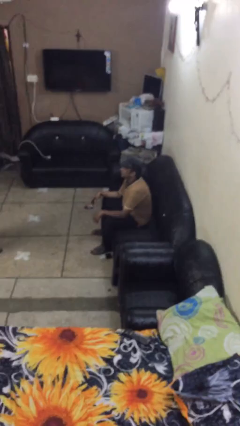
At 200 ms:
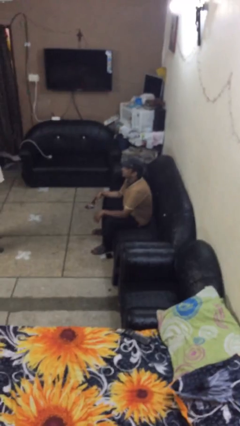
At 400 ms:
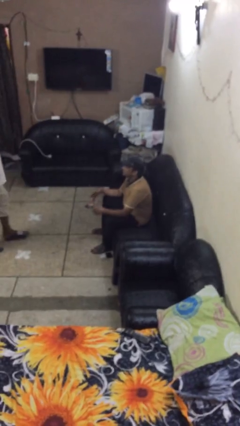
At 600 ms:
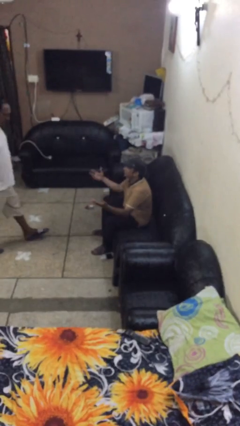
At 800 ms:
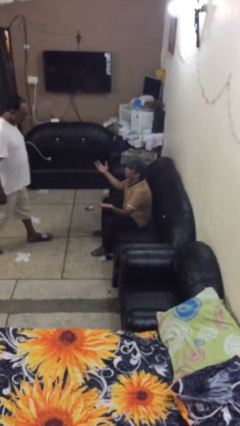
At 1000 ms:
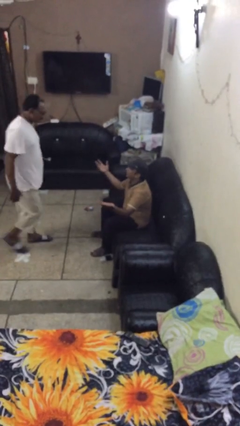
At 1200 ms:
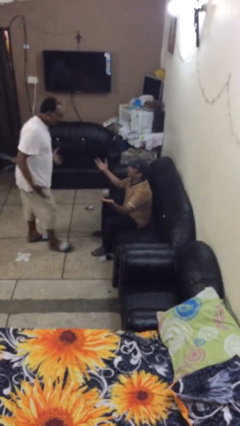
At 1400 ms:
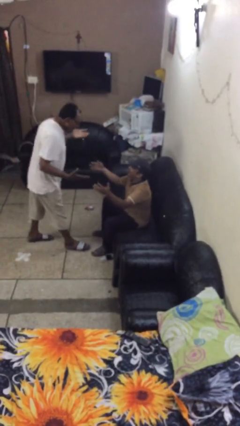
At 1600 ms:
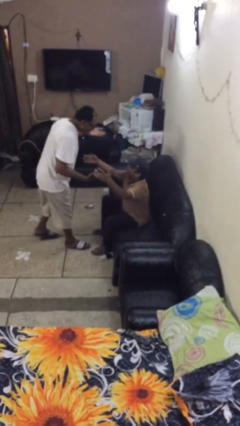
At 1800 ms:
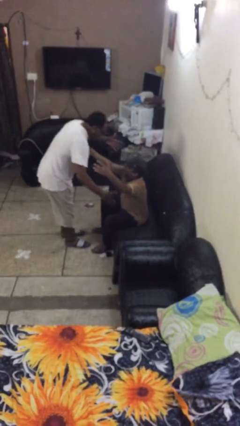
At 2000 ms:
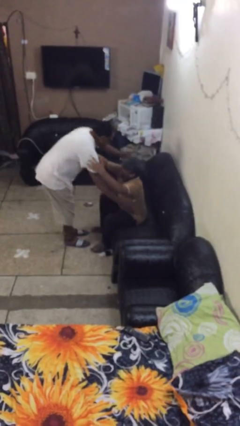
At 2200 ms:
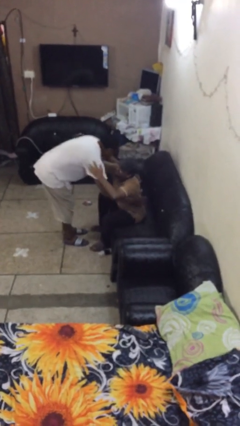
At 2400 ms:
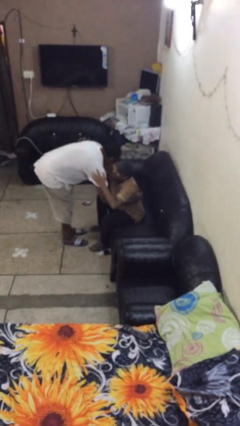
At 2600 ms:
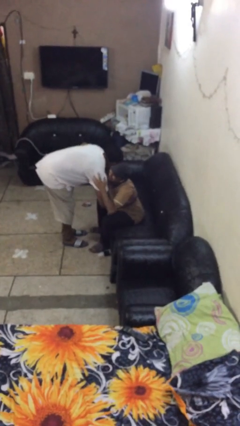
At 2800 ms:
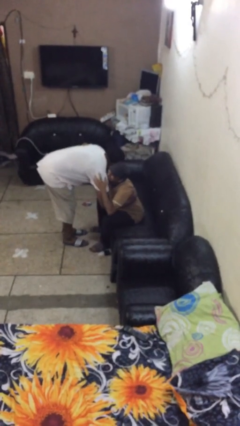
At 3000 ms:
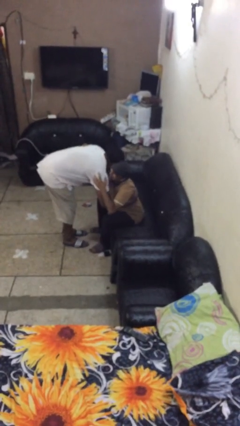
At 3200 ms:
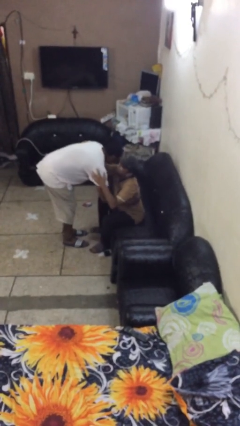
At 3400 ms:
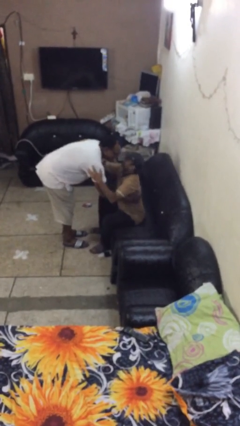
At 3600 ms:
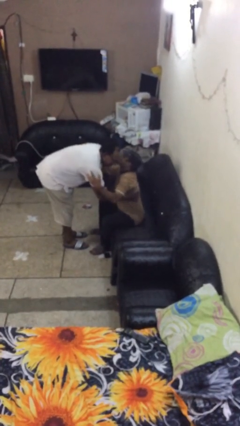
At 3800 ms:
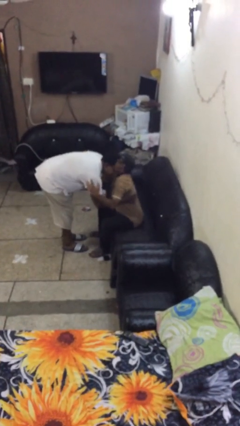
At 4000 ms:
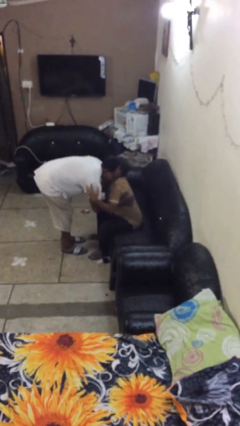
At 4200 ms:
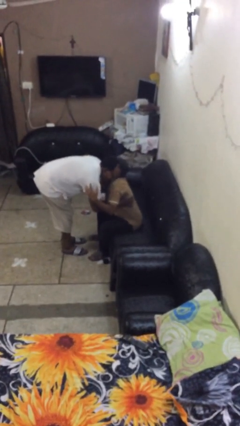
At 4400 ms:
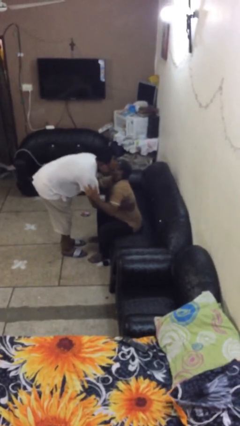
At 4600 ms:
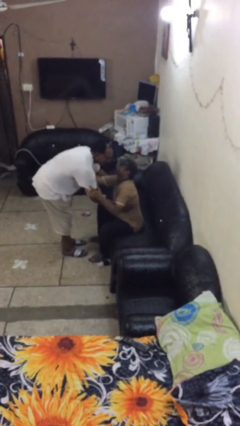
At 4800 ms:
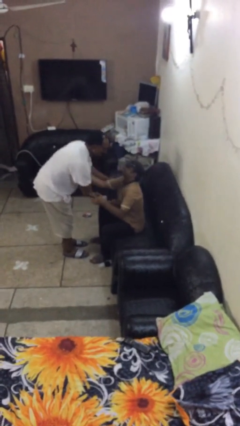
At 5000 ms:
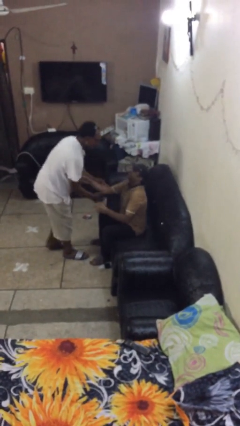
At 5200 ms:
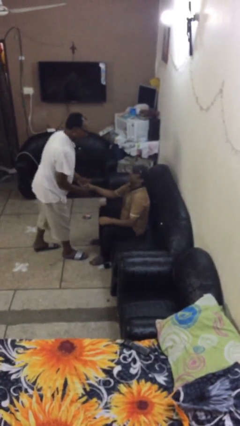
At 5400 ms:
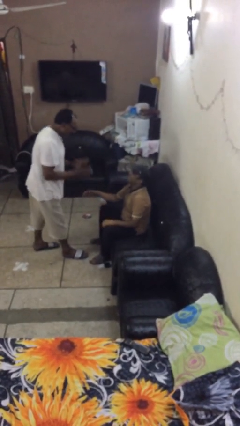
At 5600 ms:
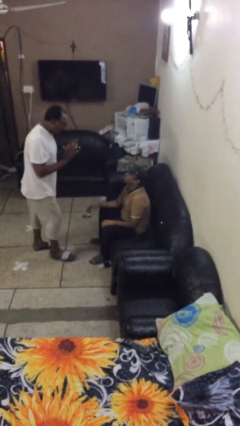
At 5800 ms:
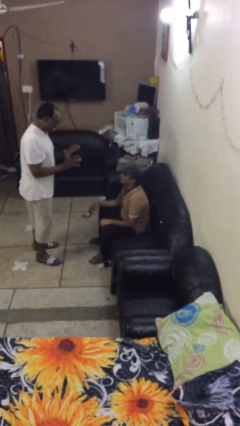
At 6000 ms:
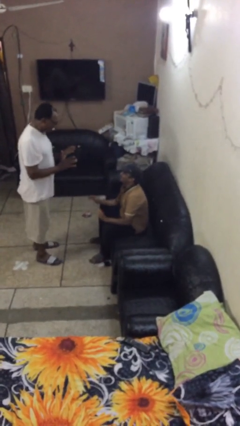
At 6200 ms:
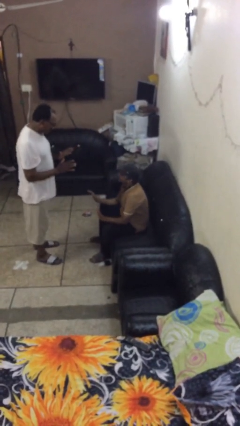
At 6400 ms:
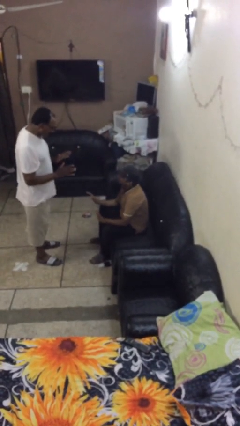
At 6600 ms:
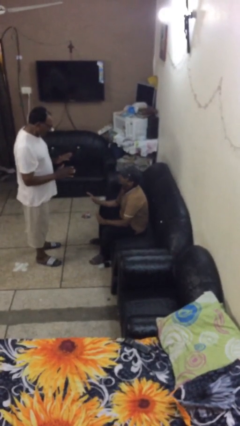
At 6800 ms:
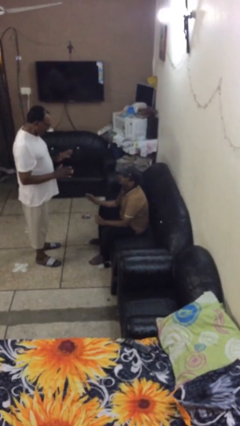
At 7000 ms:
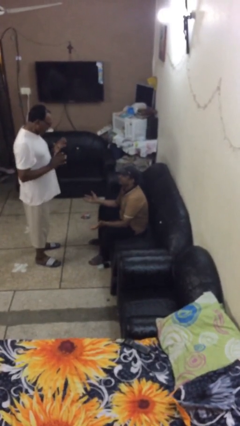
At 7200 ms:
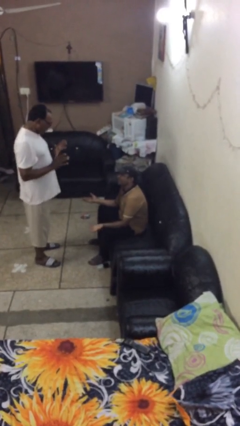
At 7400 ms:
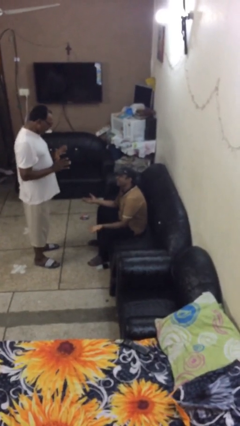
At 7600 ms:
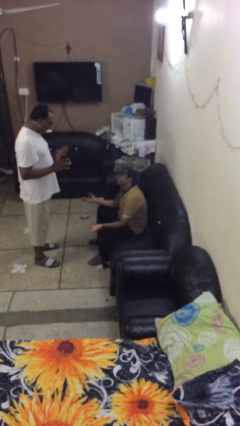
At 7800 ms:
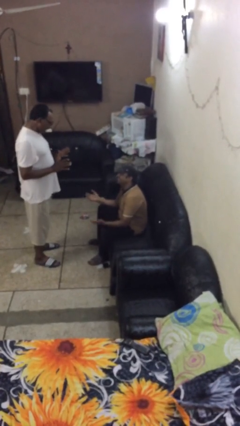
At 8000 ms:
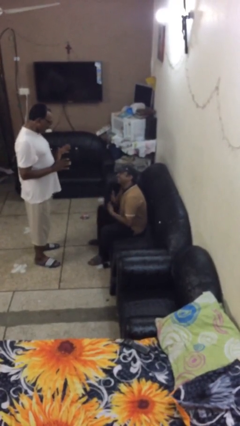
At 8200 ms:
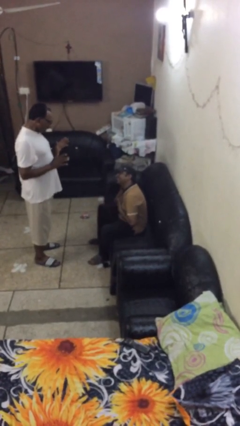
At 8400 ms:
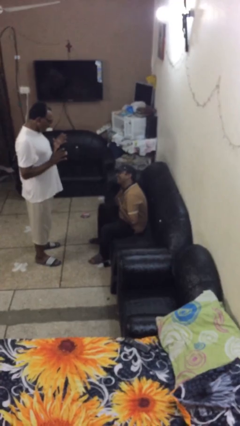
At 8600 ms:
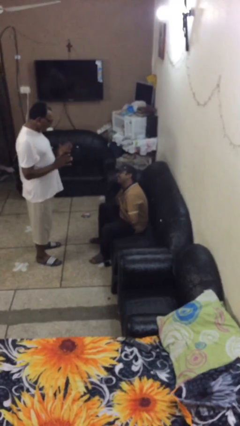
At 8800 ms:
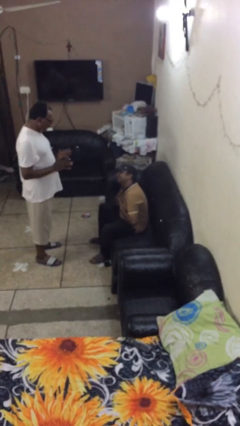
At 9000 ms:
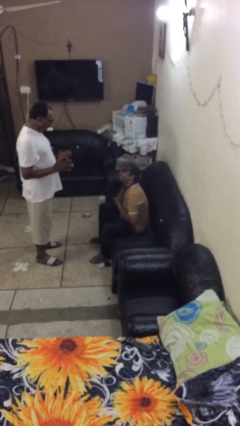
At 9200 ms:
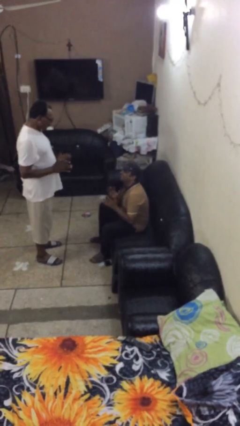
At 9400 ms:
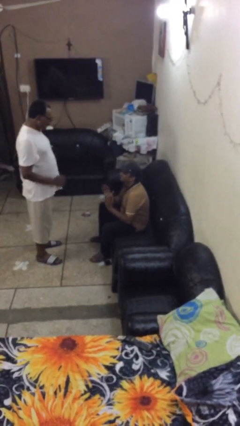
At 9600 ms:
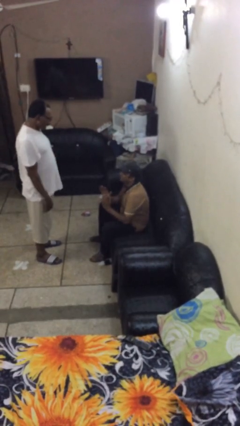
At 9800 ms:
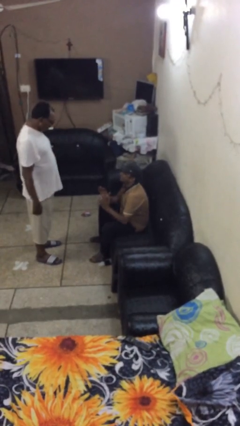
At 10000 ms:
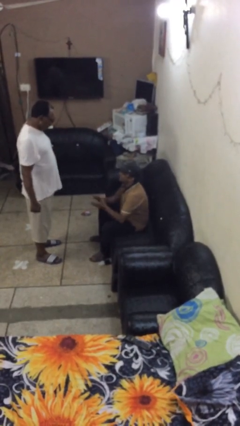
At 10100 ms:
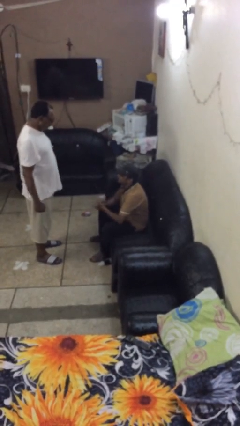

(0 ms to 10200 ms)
person embraces person

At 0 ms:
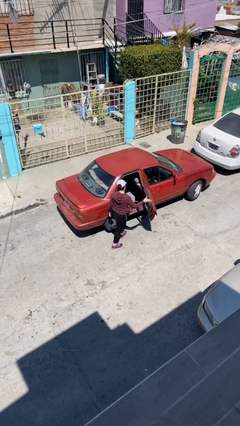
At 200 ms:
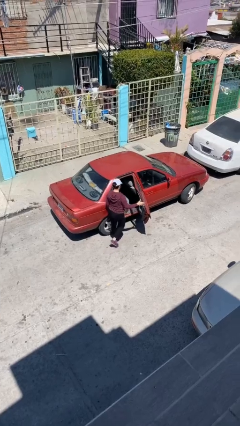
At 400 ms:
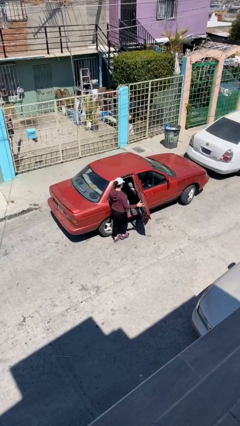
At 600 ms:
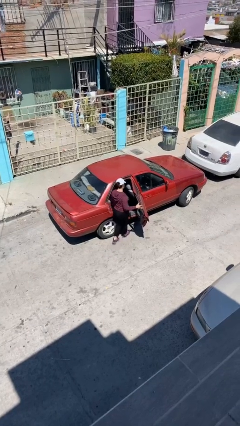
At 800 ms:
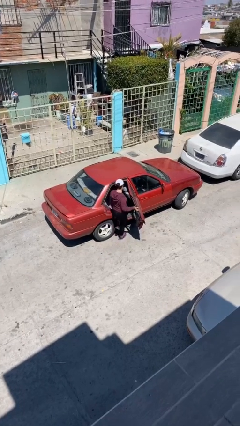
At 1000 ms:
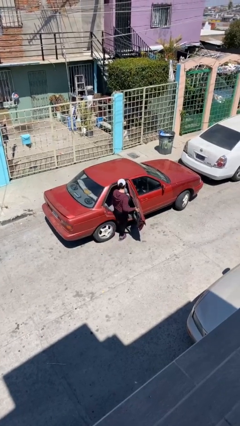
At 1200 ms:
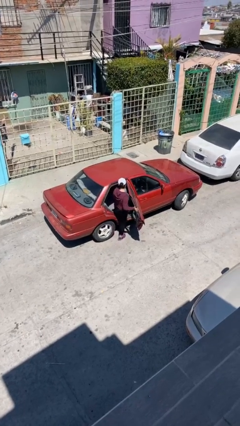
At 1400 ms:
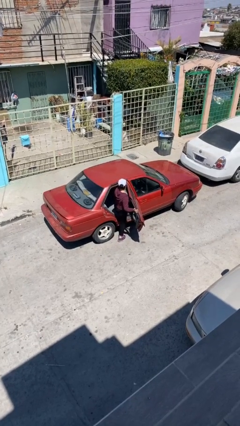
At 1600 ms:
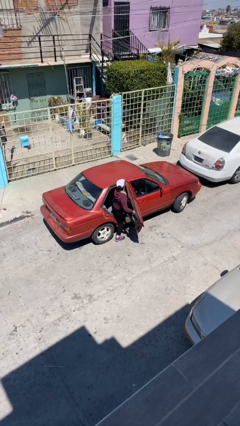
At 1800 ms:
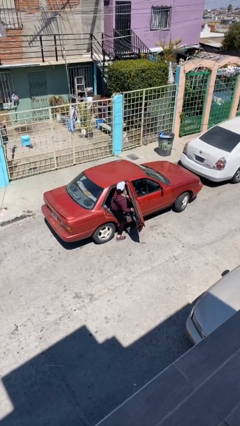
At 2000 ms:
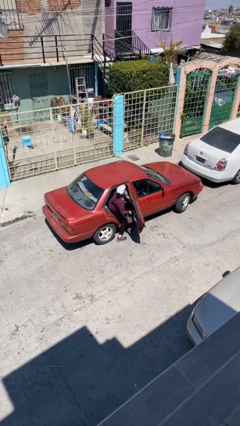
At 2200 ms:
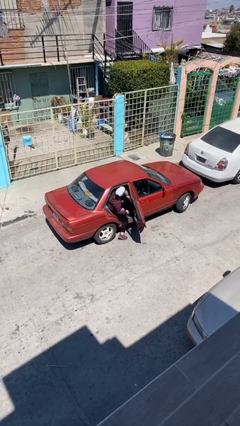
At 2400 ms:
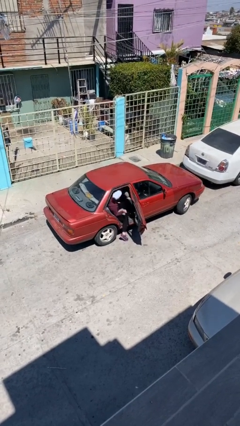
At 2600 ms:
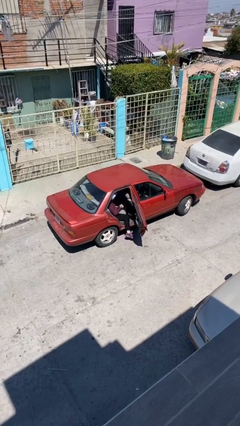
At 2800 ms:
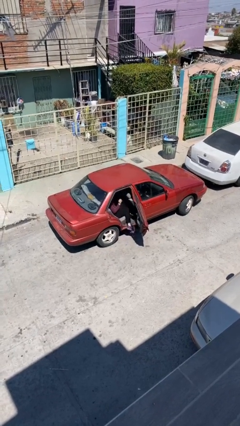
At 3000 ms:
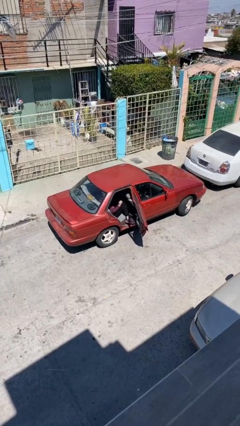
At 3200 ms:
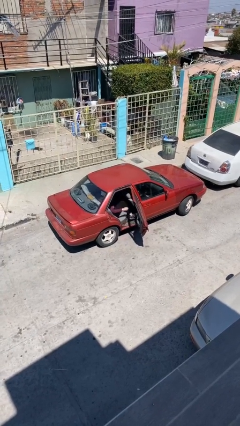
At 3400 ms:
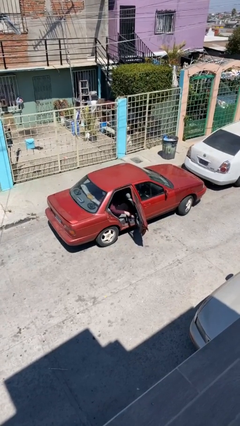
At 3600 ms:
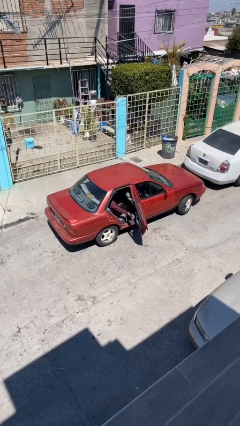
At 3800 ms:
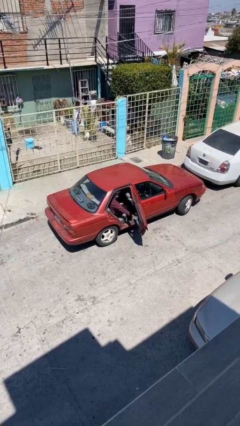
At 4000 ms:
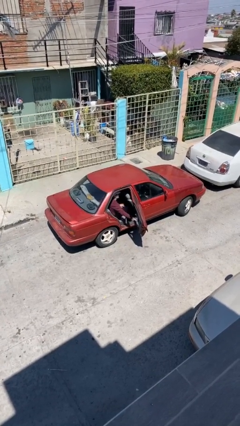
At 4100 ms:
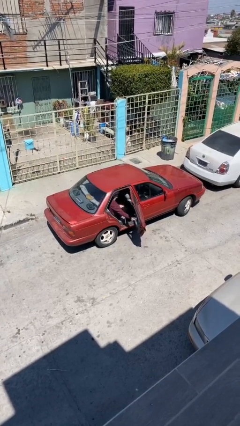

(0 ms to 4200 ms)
person enters car

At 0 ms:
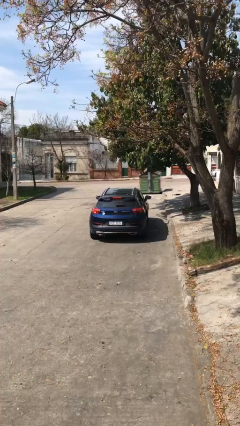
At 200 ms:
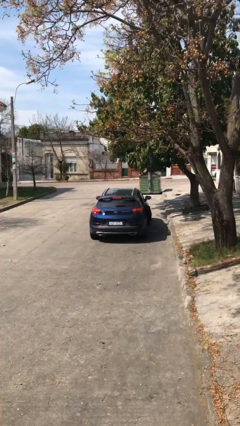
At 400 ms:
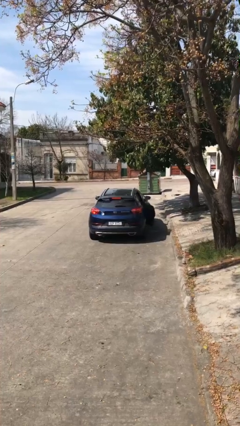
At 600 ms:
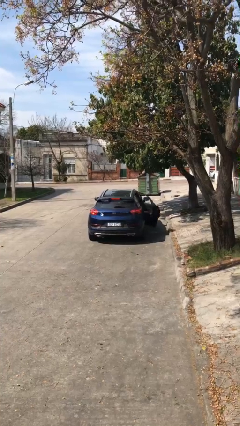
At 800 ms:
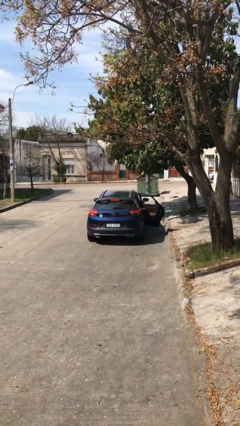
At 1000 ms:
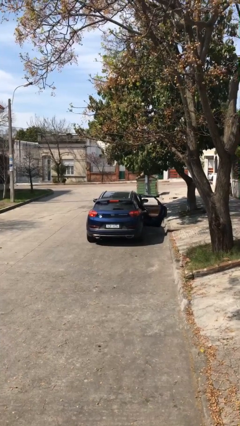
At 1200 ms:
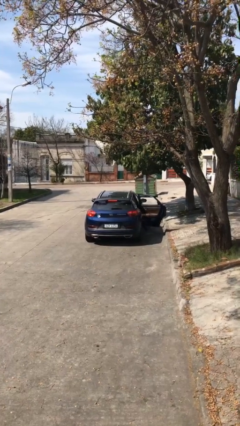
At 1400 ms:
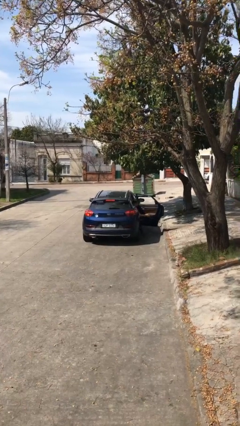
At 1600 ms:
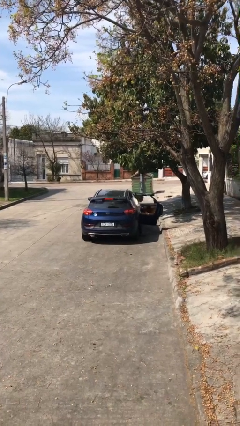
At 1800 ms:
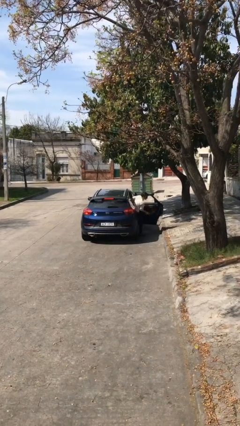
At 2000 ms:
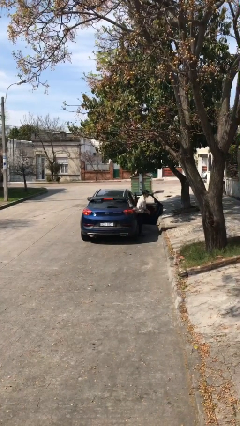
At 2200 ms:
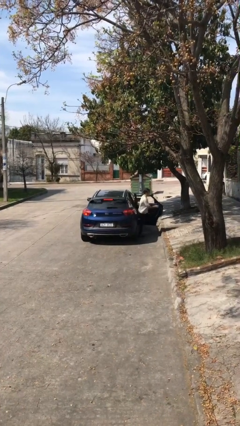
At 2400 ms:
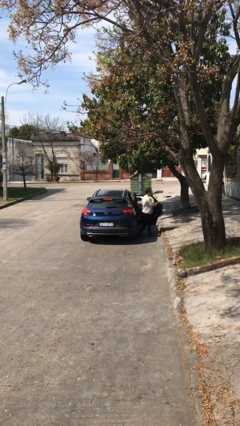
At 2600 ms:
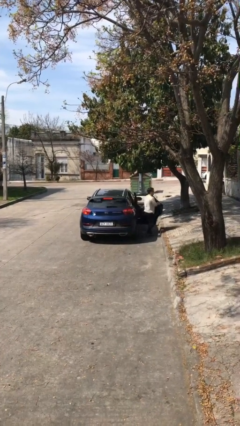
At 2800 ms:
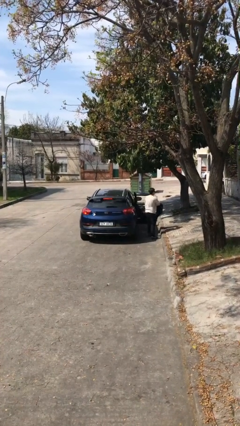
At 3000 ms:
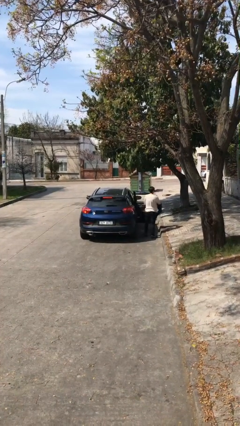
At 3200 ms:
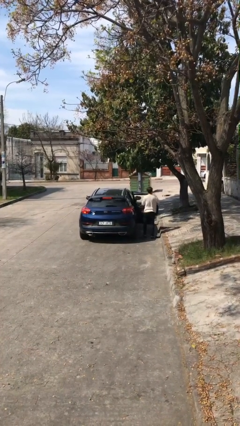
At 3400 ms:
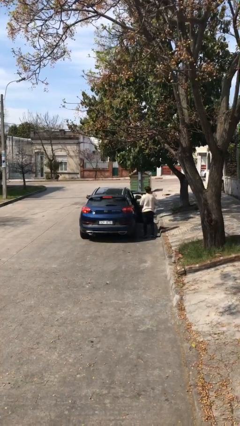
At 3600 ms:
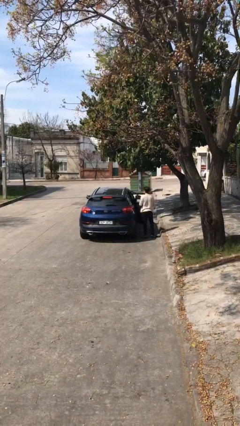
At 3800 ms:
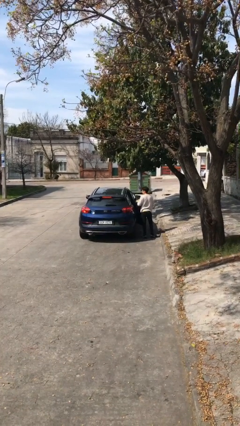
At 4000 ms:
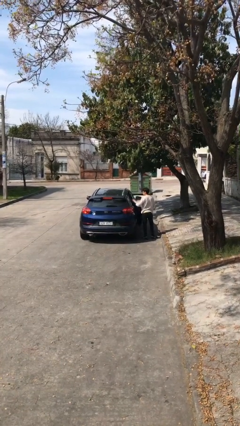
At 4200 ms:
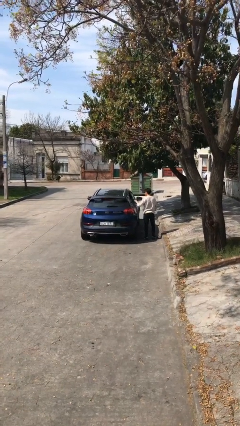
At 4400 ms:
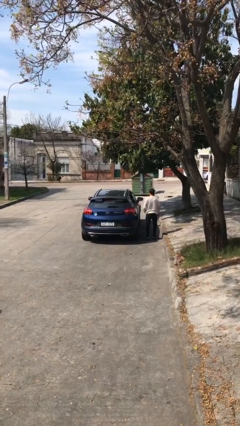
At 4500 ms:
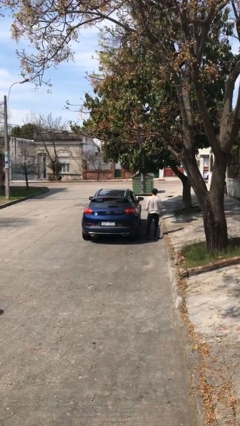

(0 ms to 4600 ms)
car drops off person
